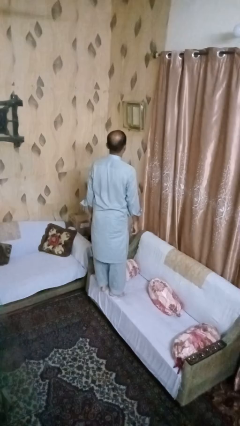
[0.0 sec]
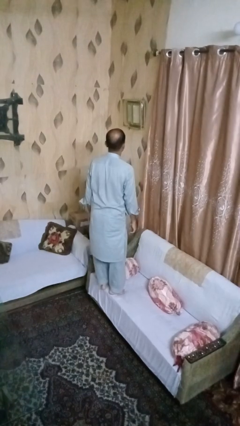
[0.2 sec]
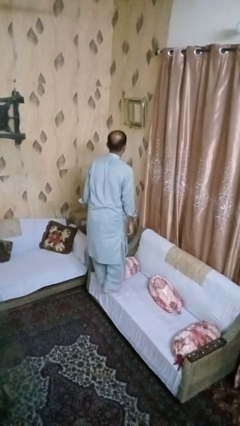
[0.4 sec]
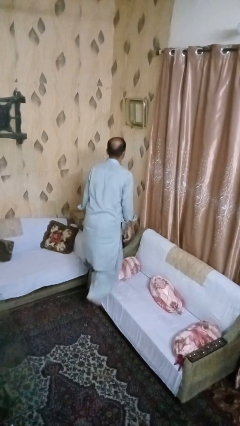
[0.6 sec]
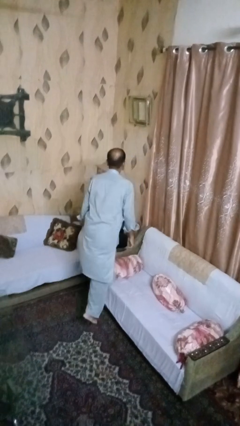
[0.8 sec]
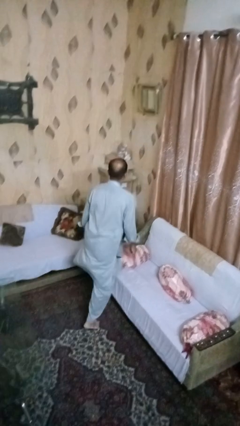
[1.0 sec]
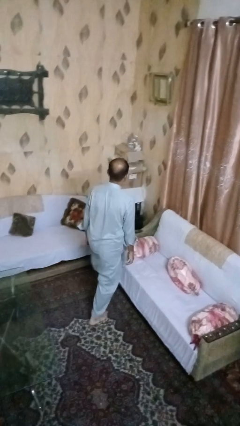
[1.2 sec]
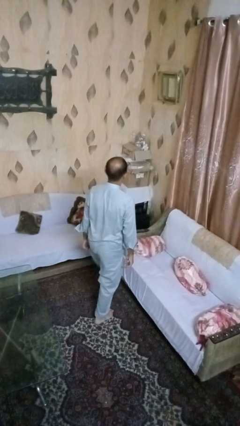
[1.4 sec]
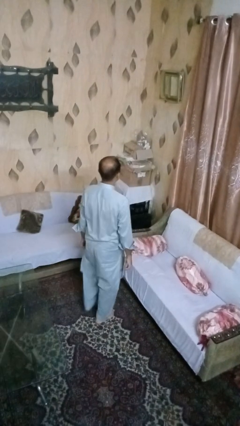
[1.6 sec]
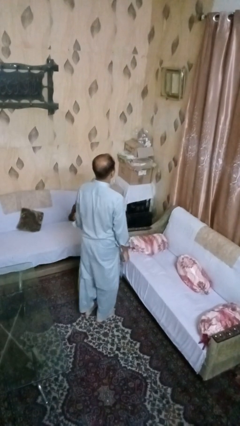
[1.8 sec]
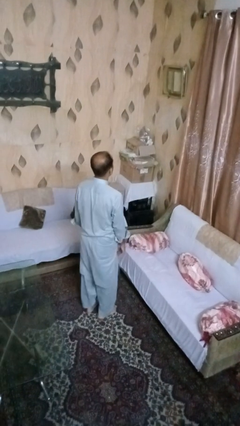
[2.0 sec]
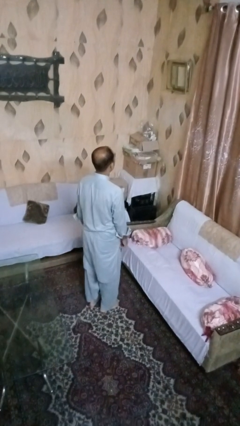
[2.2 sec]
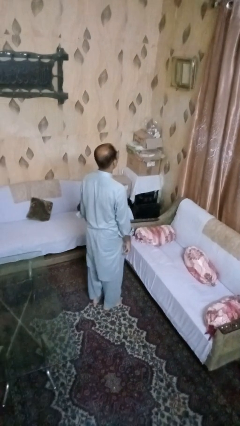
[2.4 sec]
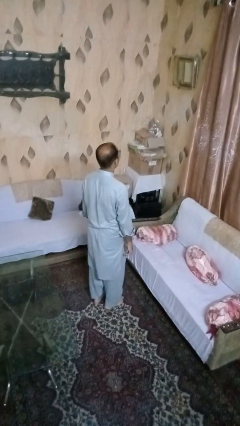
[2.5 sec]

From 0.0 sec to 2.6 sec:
person climbs off couch

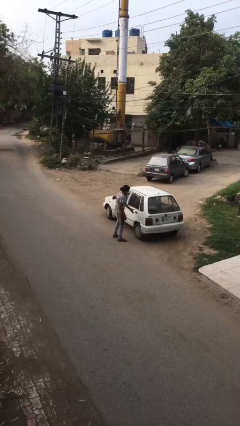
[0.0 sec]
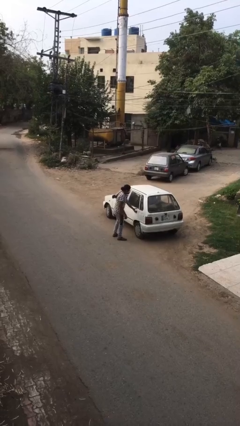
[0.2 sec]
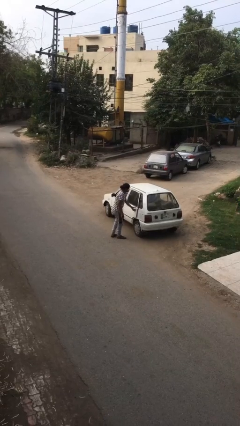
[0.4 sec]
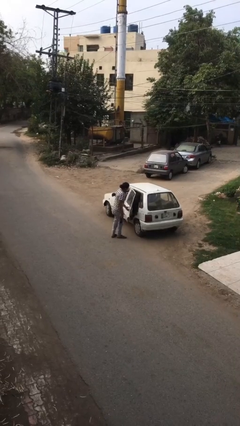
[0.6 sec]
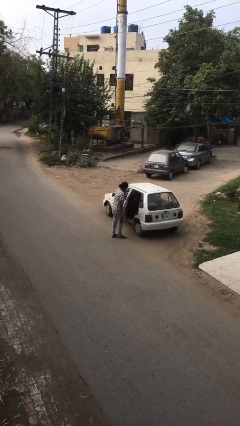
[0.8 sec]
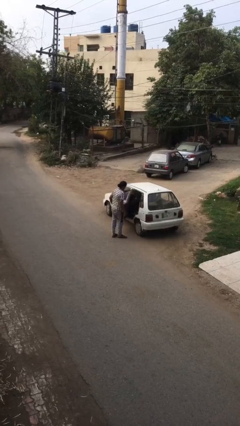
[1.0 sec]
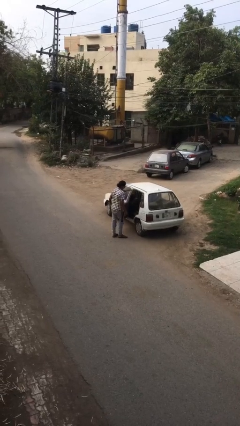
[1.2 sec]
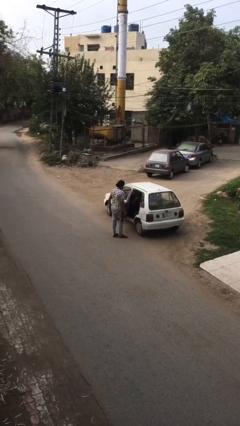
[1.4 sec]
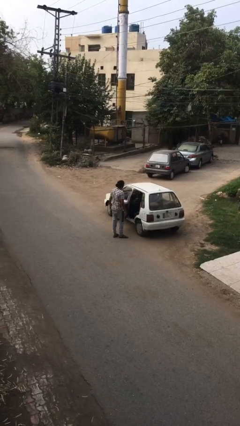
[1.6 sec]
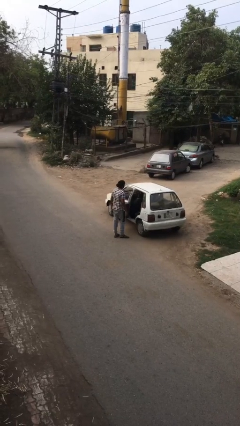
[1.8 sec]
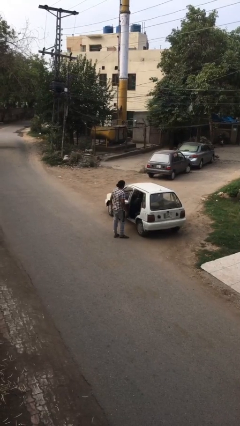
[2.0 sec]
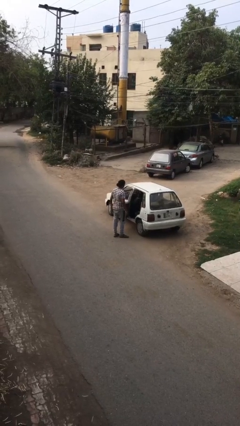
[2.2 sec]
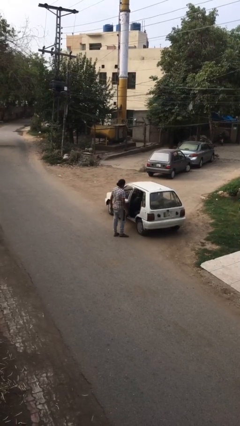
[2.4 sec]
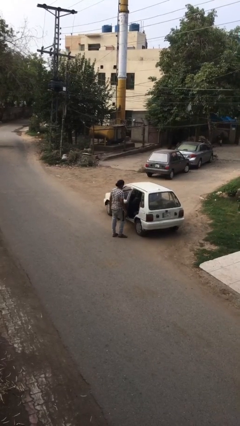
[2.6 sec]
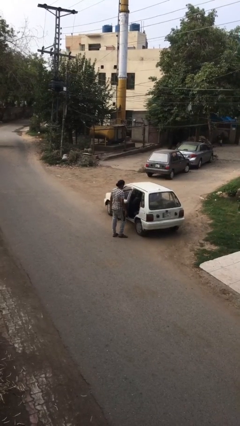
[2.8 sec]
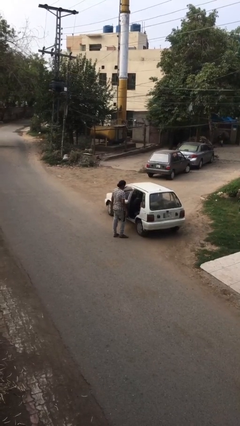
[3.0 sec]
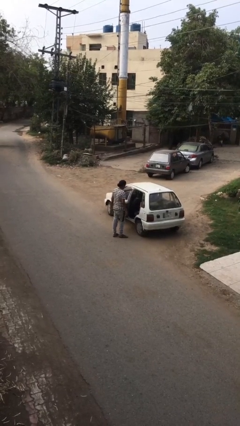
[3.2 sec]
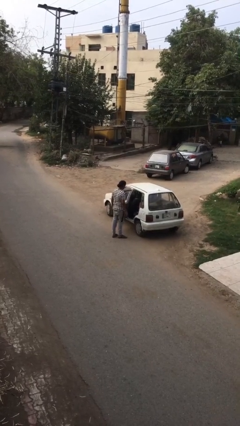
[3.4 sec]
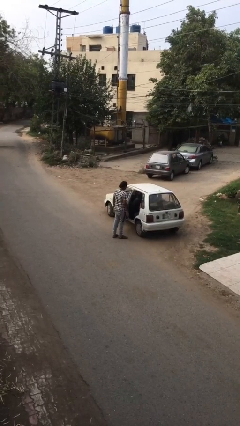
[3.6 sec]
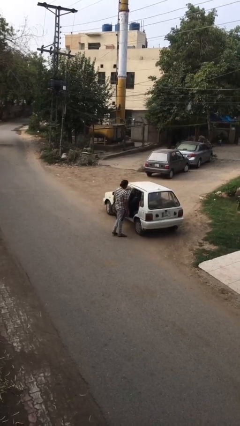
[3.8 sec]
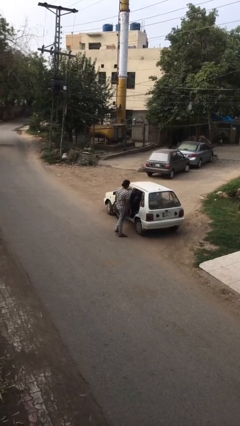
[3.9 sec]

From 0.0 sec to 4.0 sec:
person opens car door

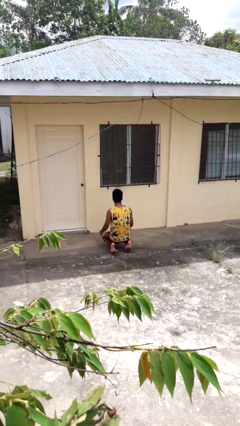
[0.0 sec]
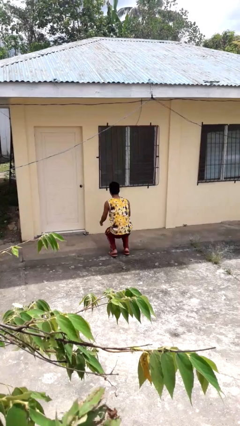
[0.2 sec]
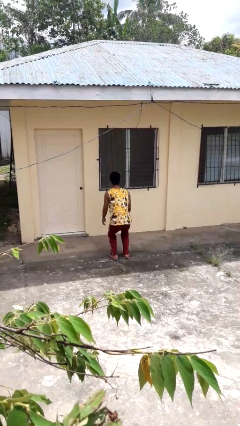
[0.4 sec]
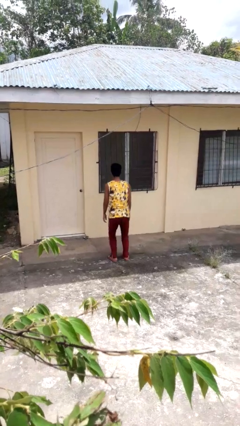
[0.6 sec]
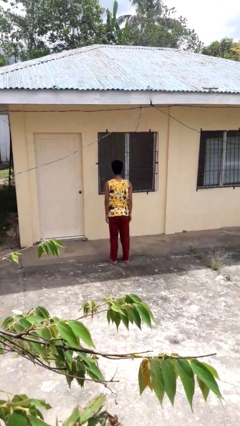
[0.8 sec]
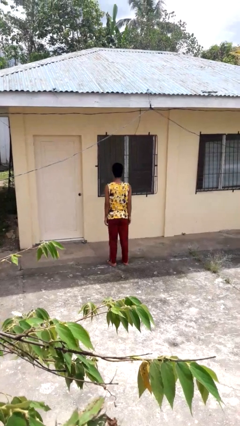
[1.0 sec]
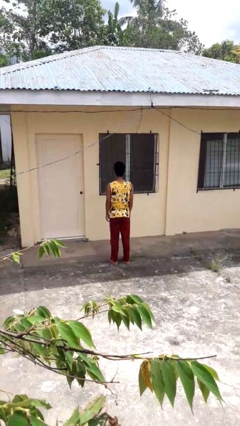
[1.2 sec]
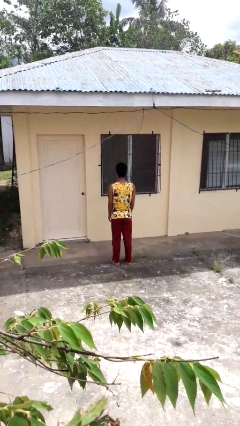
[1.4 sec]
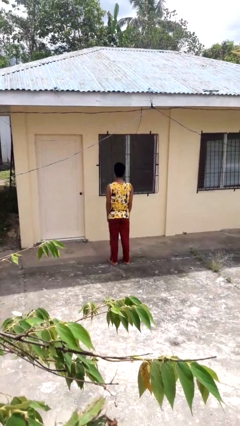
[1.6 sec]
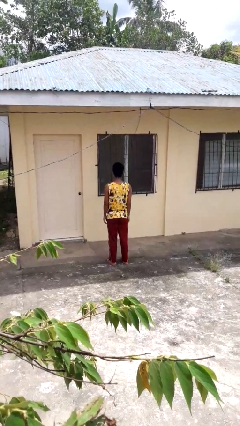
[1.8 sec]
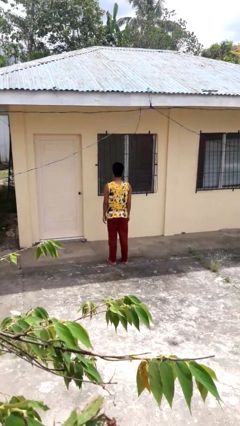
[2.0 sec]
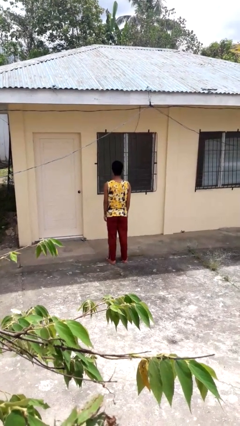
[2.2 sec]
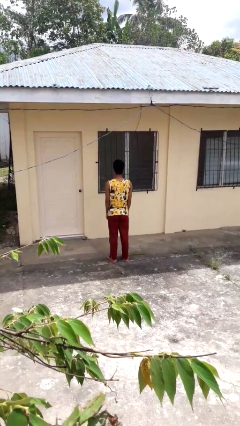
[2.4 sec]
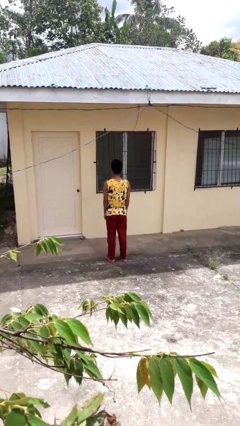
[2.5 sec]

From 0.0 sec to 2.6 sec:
person stands up from floor

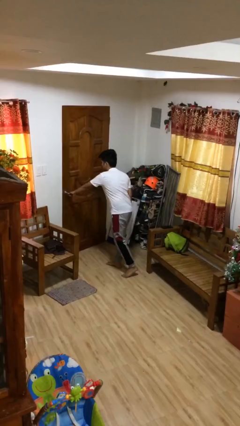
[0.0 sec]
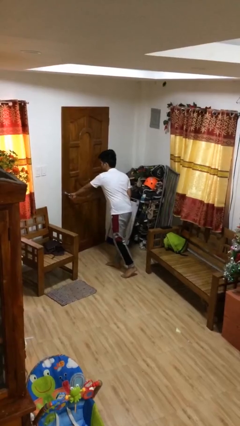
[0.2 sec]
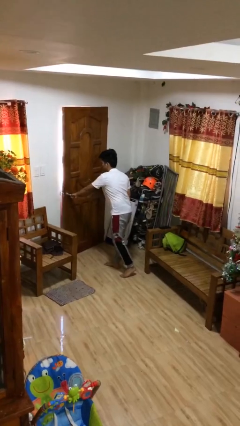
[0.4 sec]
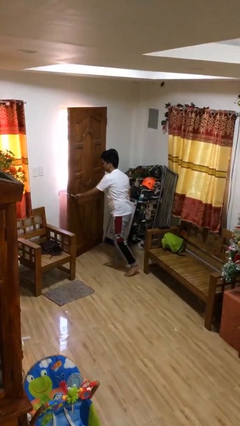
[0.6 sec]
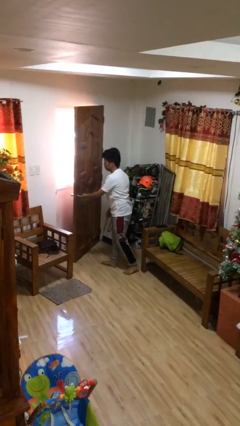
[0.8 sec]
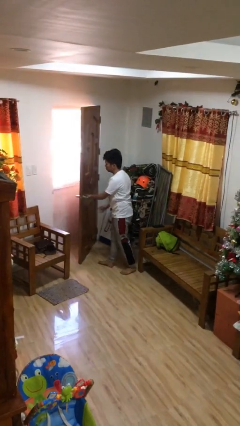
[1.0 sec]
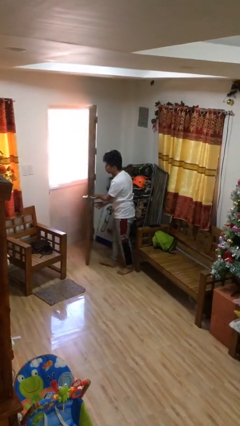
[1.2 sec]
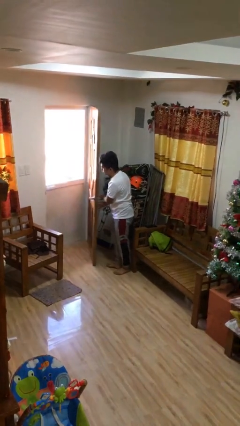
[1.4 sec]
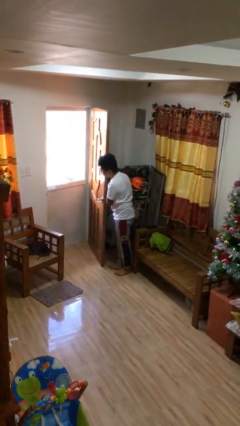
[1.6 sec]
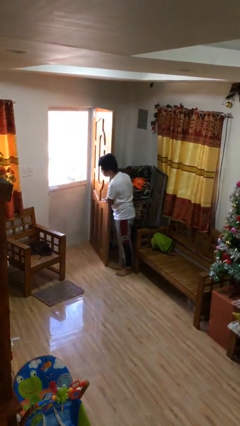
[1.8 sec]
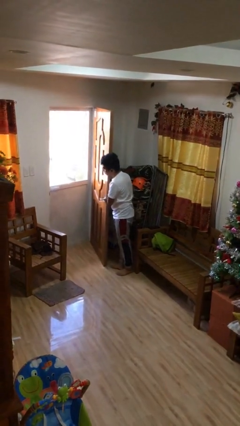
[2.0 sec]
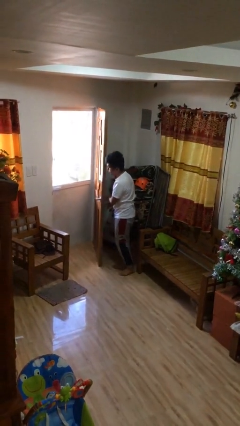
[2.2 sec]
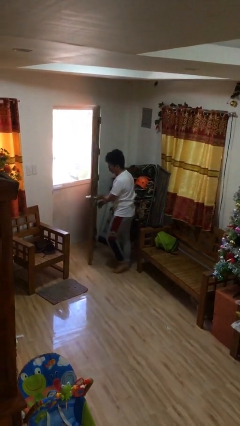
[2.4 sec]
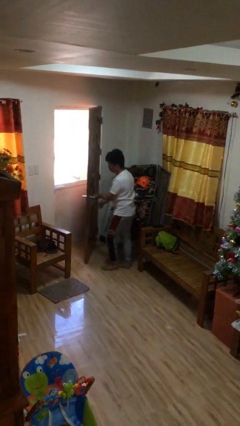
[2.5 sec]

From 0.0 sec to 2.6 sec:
person opens facility door

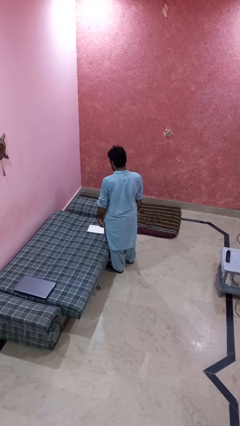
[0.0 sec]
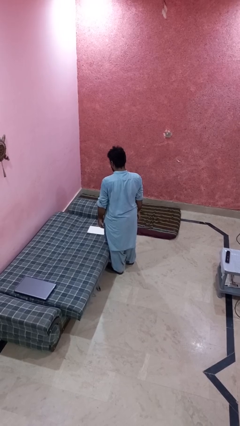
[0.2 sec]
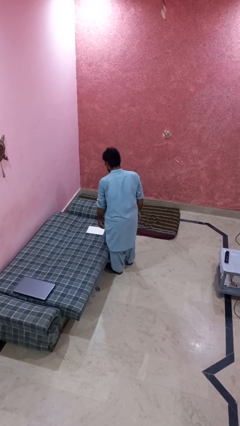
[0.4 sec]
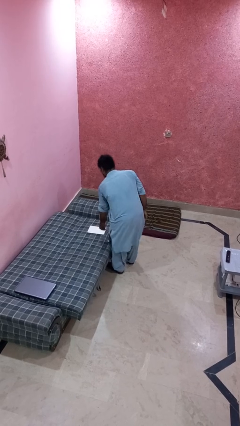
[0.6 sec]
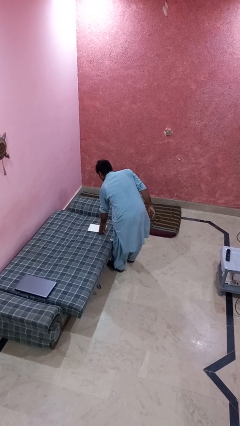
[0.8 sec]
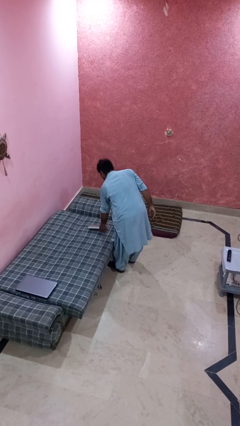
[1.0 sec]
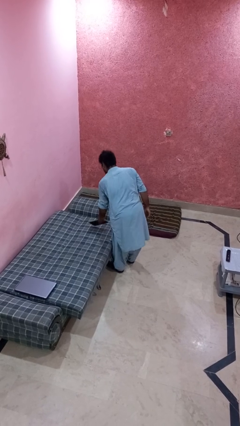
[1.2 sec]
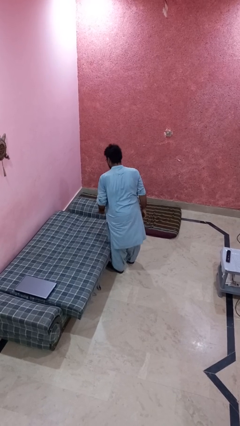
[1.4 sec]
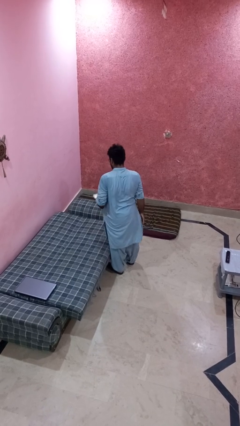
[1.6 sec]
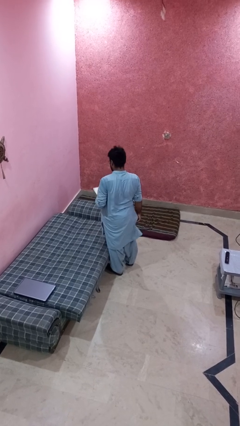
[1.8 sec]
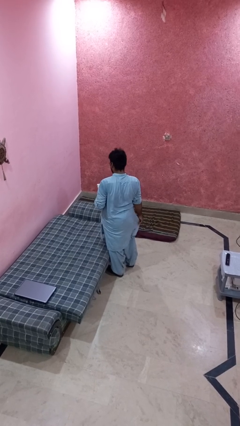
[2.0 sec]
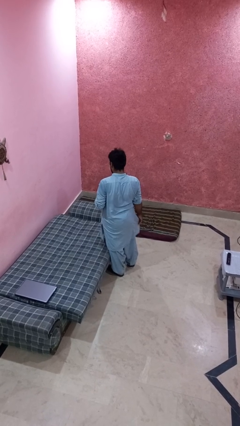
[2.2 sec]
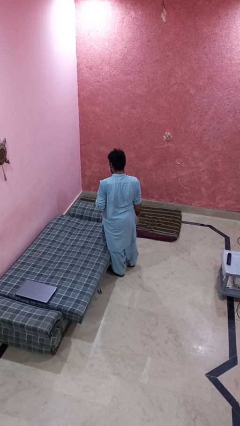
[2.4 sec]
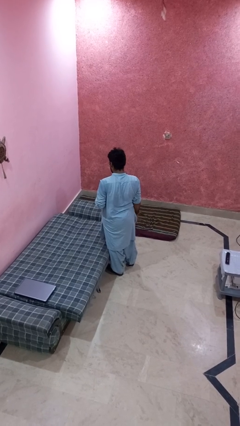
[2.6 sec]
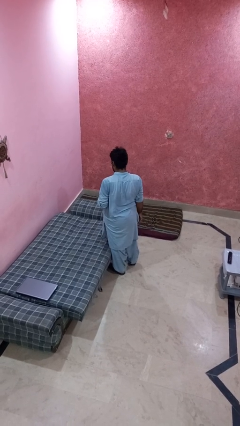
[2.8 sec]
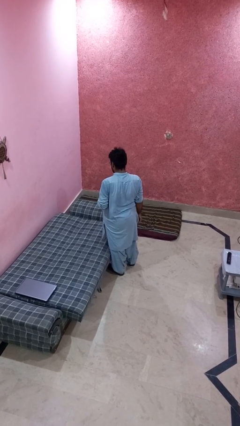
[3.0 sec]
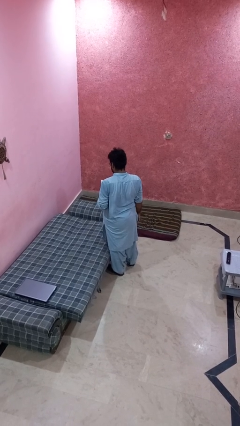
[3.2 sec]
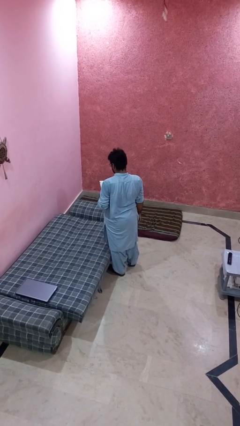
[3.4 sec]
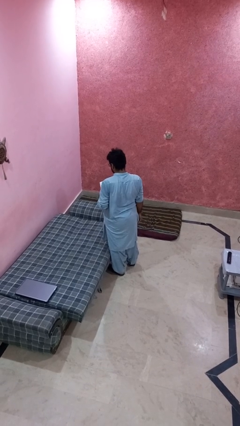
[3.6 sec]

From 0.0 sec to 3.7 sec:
person picks up object from bed

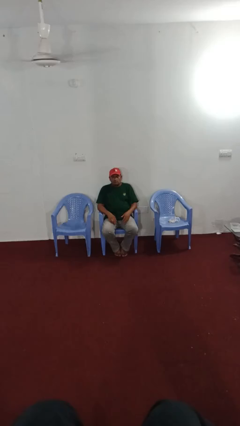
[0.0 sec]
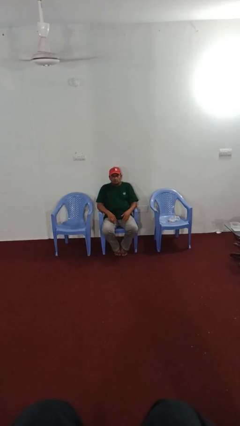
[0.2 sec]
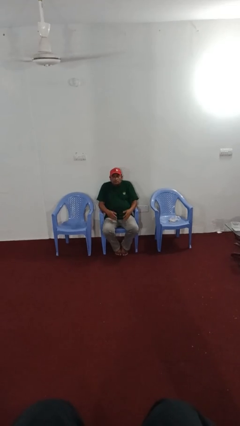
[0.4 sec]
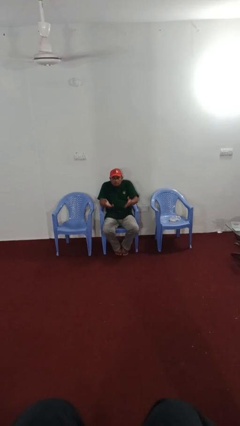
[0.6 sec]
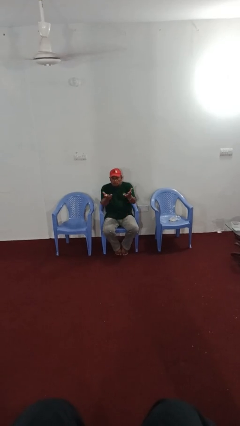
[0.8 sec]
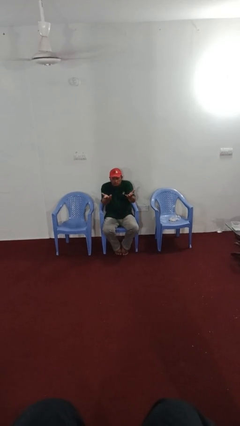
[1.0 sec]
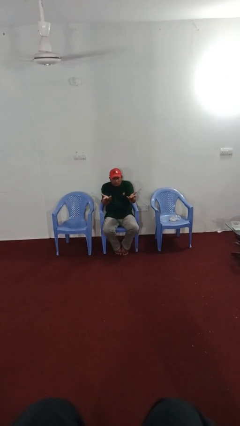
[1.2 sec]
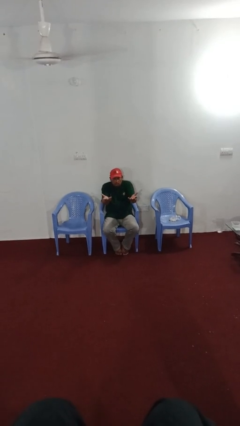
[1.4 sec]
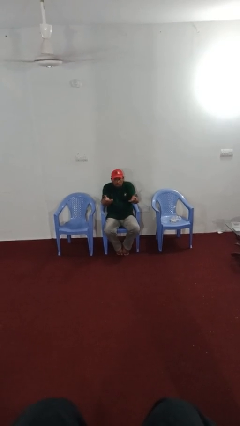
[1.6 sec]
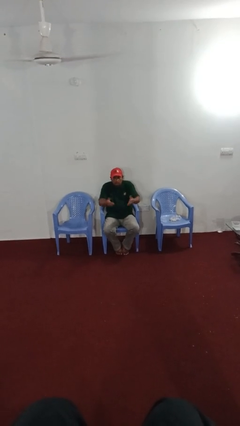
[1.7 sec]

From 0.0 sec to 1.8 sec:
person shrugs
